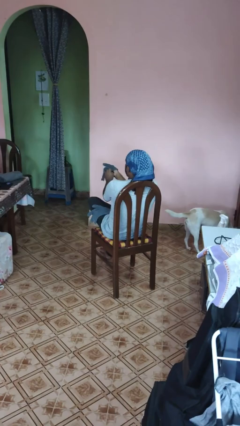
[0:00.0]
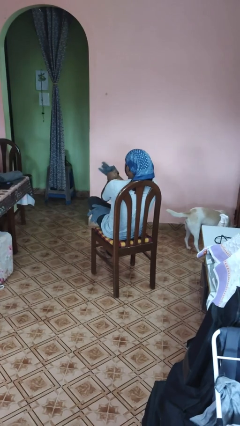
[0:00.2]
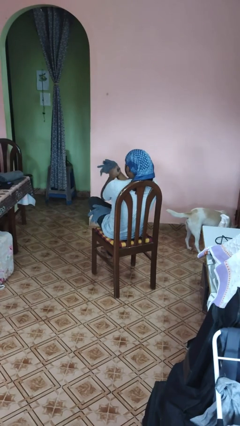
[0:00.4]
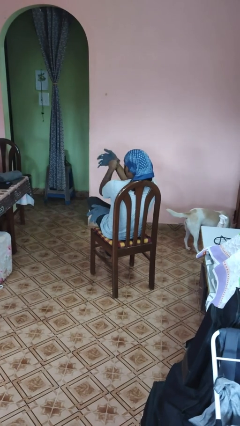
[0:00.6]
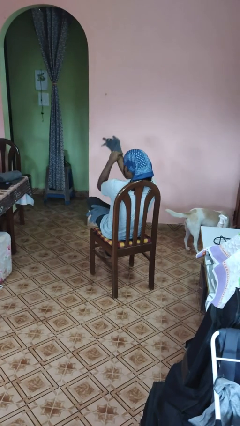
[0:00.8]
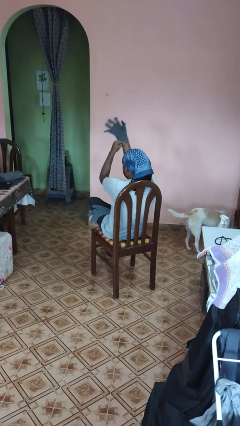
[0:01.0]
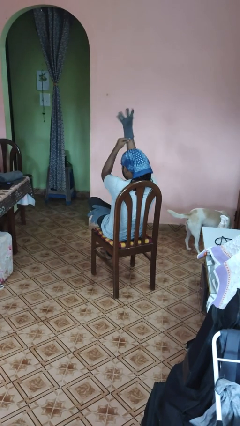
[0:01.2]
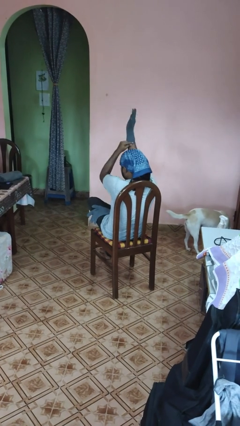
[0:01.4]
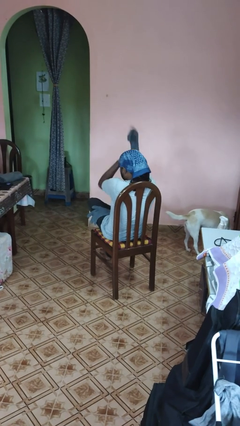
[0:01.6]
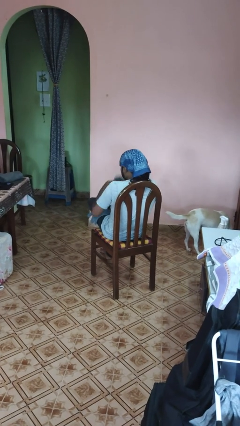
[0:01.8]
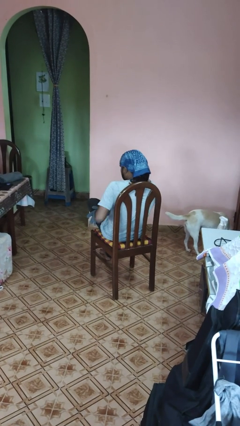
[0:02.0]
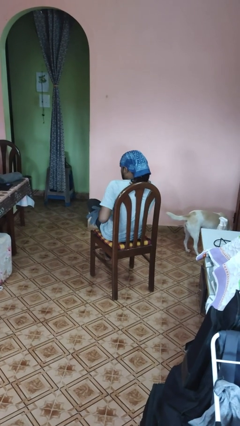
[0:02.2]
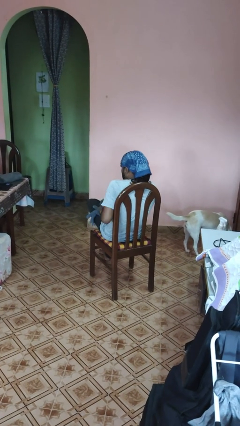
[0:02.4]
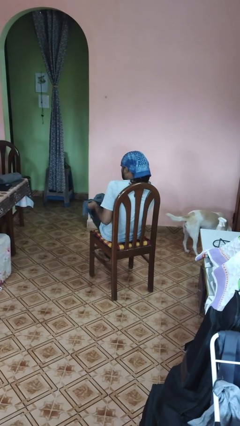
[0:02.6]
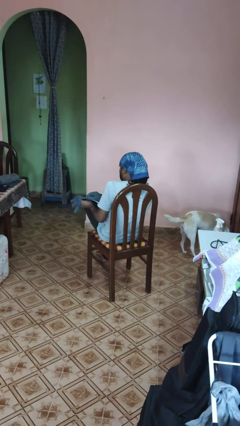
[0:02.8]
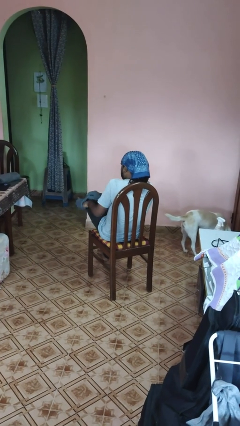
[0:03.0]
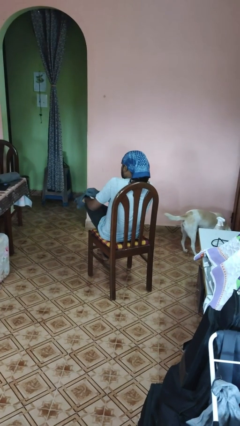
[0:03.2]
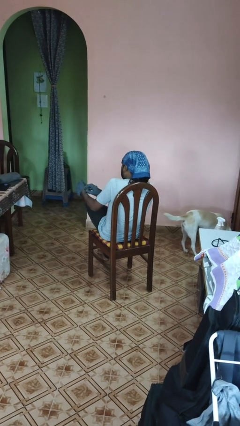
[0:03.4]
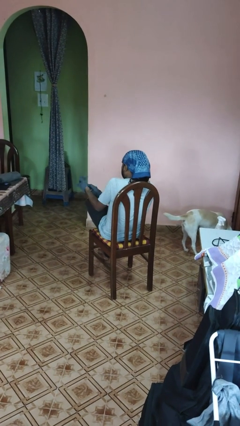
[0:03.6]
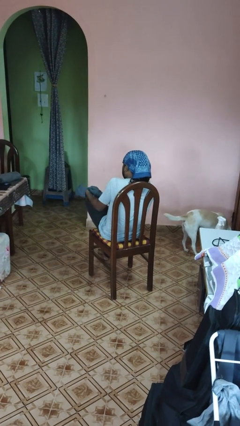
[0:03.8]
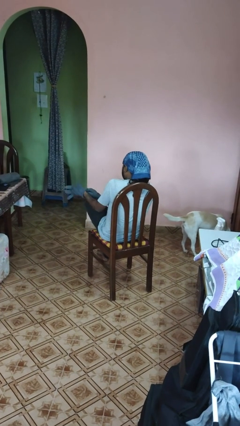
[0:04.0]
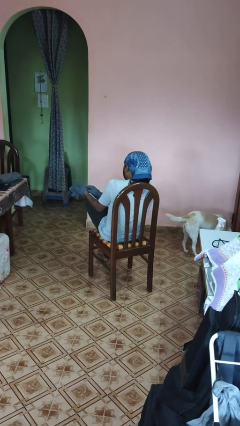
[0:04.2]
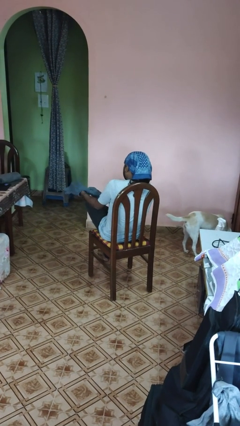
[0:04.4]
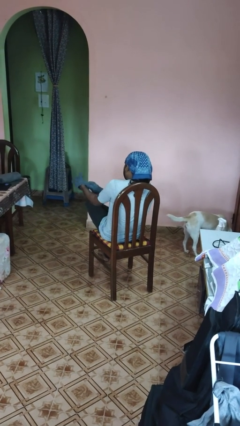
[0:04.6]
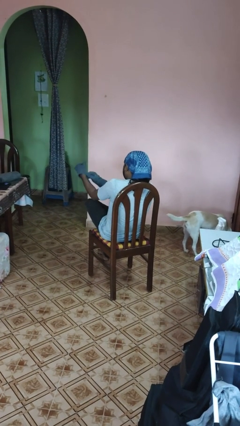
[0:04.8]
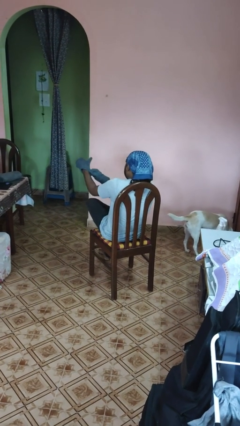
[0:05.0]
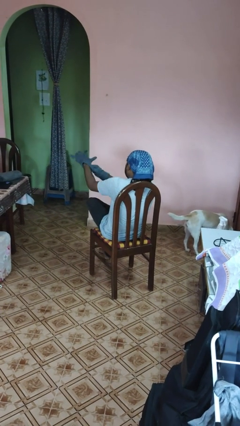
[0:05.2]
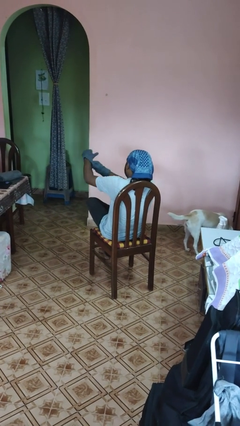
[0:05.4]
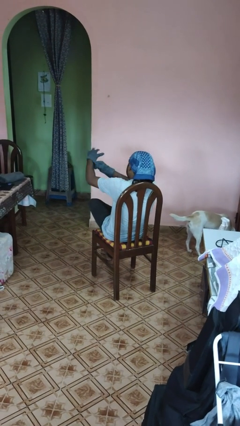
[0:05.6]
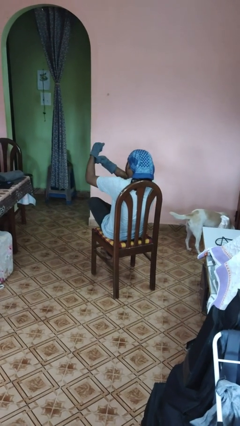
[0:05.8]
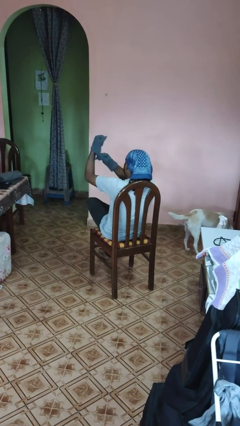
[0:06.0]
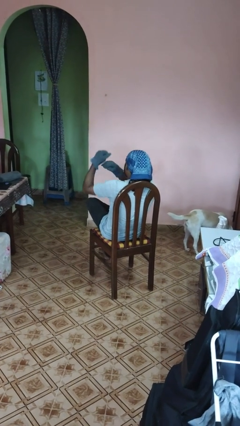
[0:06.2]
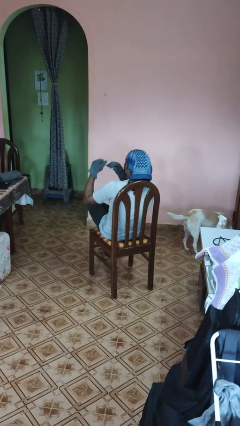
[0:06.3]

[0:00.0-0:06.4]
person puts on gloves

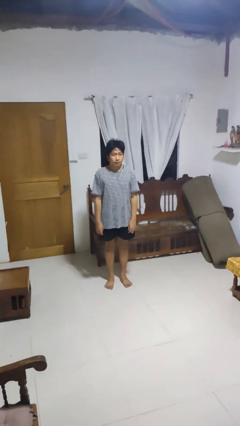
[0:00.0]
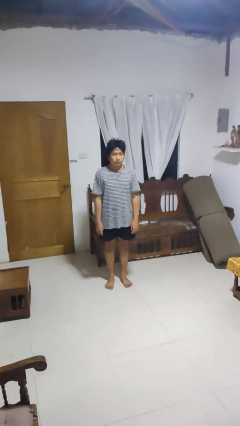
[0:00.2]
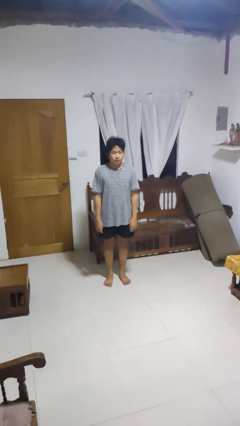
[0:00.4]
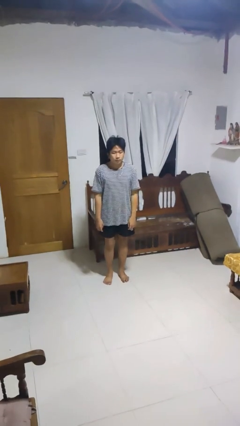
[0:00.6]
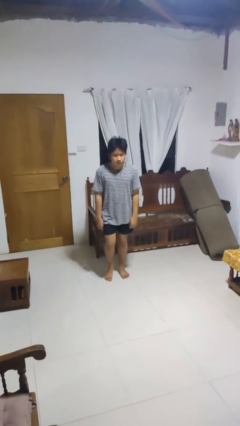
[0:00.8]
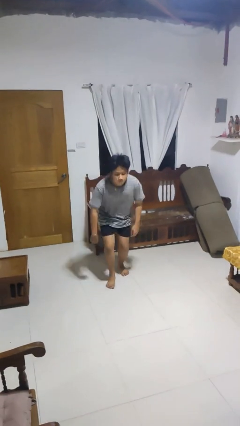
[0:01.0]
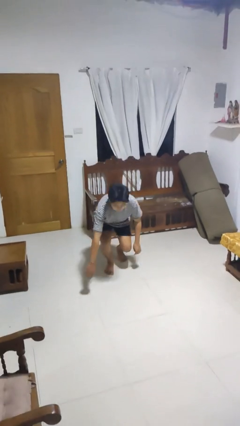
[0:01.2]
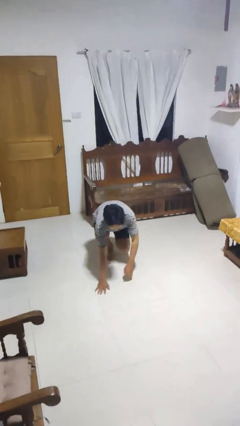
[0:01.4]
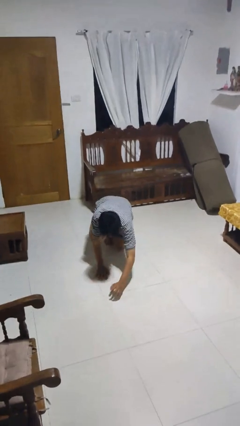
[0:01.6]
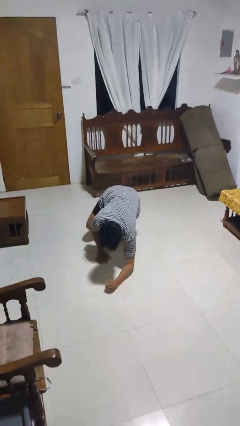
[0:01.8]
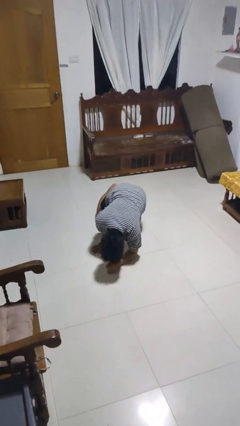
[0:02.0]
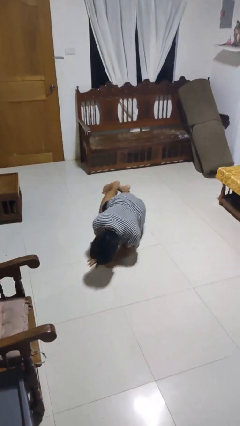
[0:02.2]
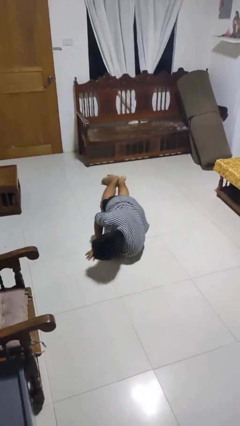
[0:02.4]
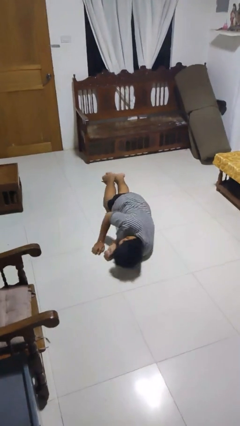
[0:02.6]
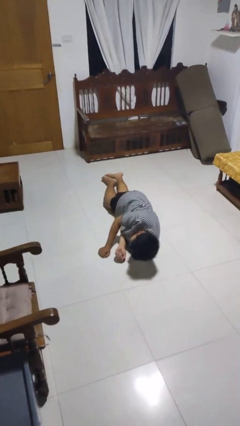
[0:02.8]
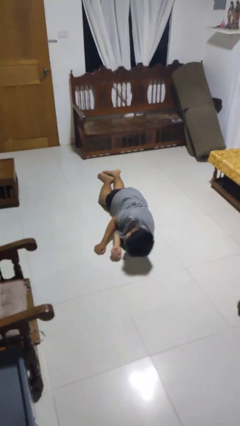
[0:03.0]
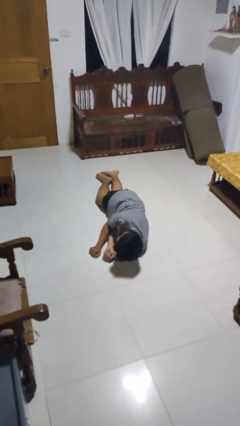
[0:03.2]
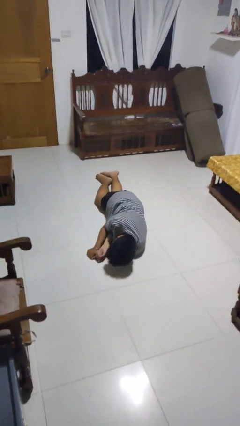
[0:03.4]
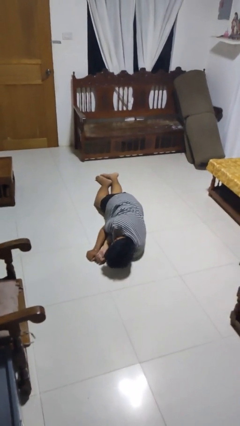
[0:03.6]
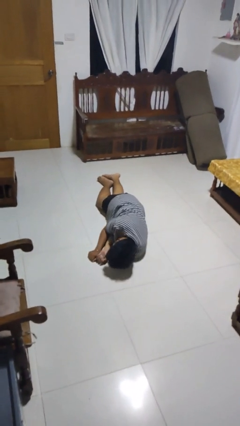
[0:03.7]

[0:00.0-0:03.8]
person falls while standing

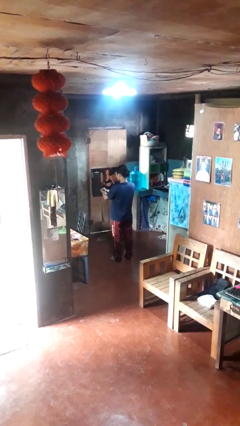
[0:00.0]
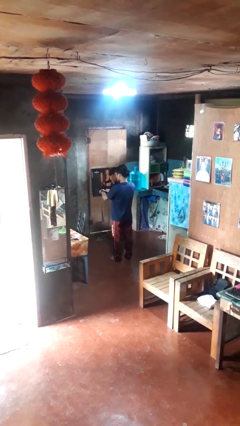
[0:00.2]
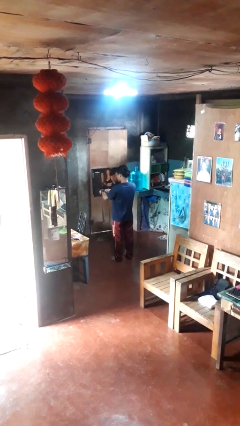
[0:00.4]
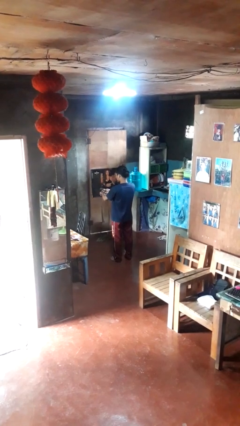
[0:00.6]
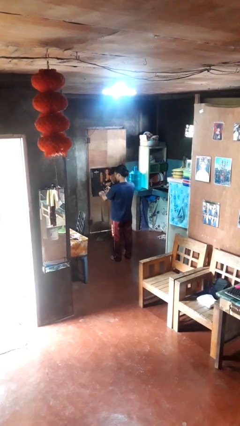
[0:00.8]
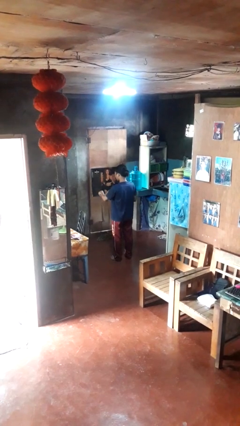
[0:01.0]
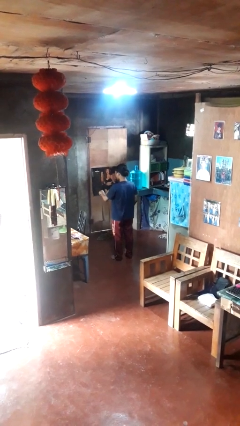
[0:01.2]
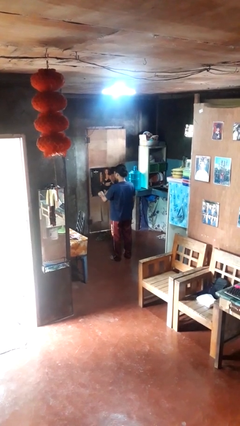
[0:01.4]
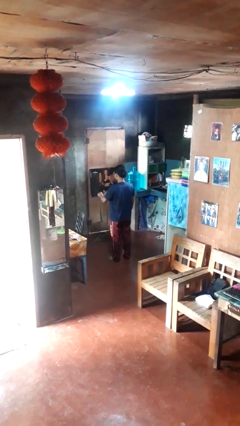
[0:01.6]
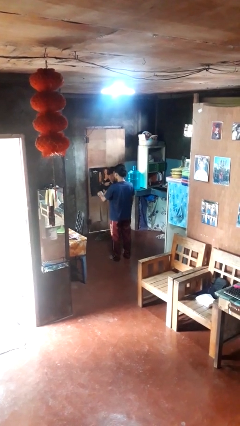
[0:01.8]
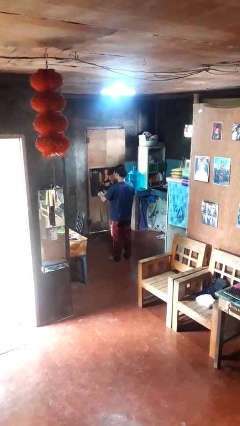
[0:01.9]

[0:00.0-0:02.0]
person takes off wristwatch

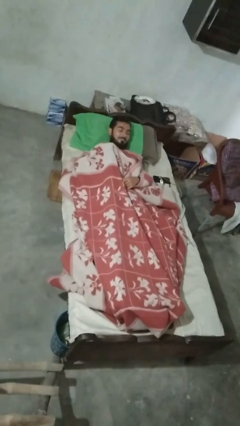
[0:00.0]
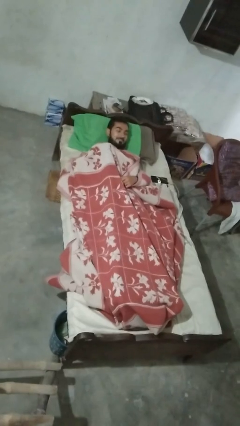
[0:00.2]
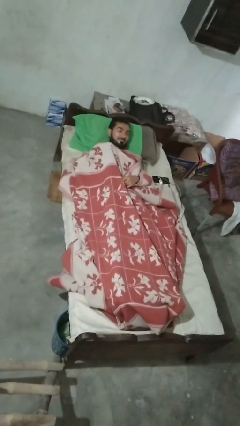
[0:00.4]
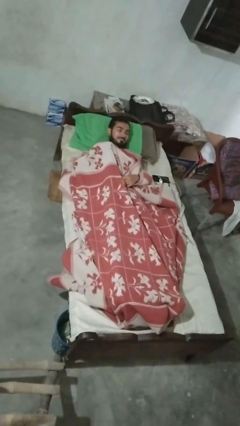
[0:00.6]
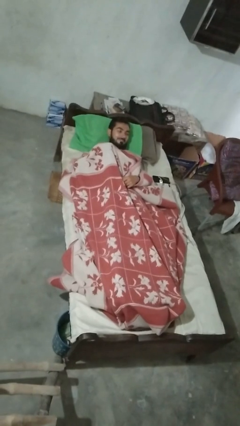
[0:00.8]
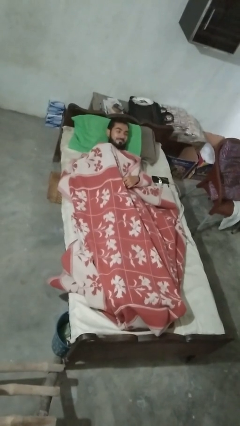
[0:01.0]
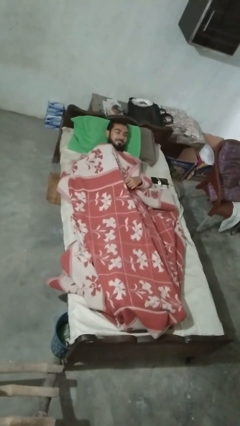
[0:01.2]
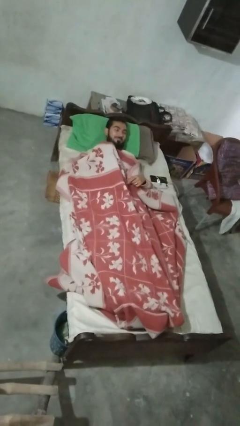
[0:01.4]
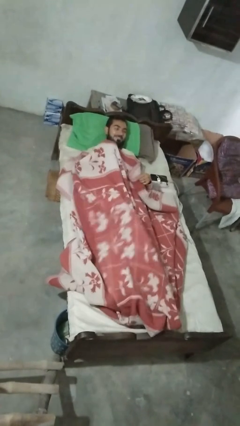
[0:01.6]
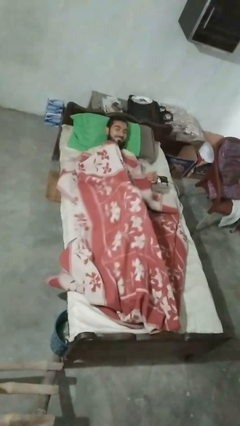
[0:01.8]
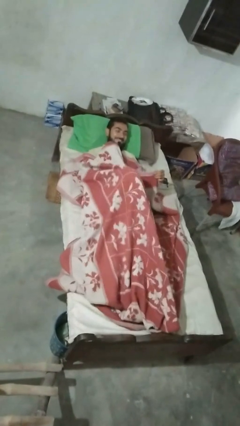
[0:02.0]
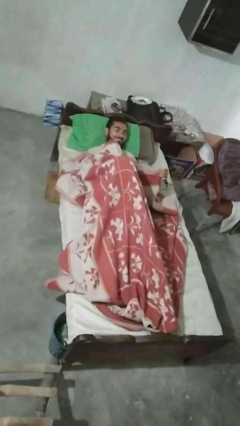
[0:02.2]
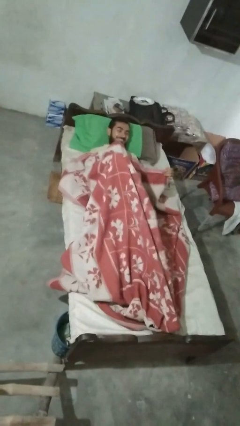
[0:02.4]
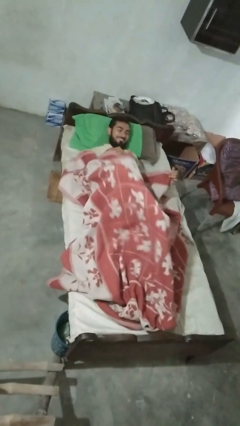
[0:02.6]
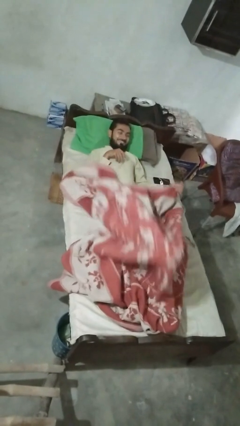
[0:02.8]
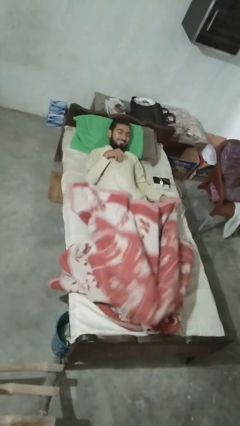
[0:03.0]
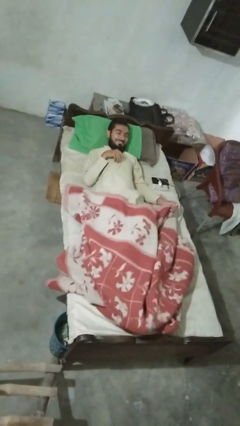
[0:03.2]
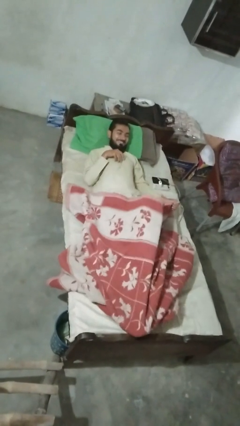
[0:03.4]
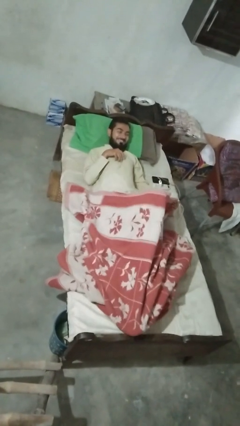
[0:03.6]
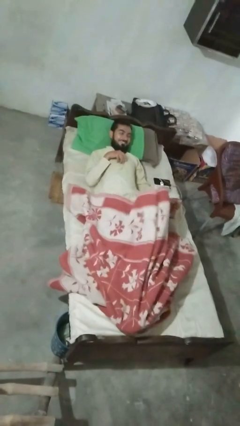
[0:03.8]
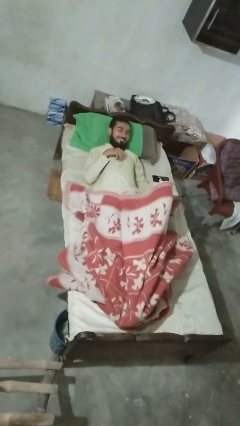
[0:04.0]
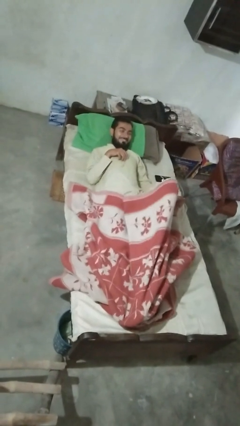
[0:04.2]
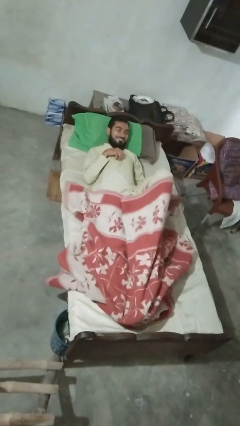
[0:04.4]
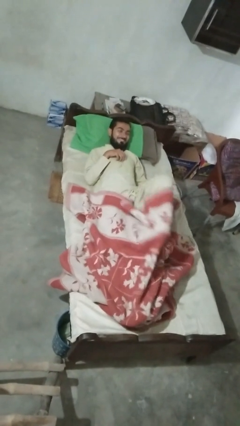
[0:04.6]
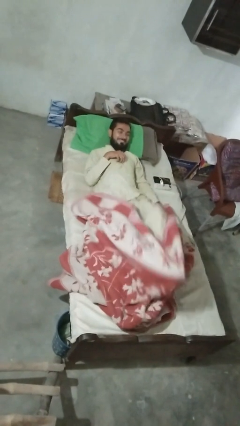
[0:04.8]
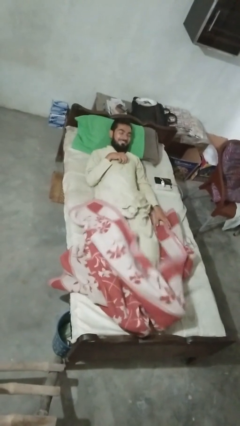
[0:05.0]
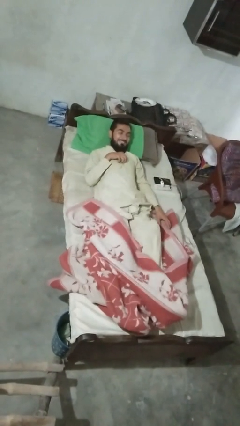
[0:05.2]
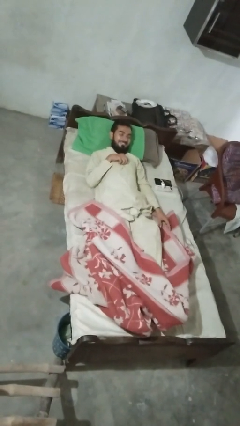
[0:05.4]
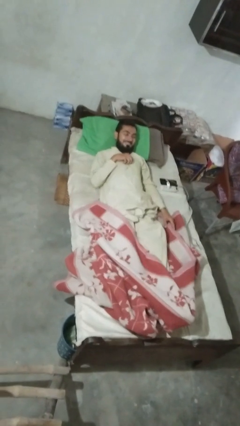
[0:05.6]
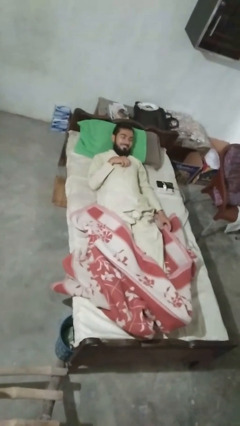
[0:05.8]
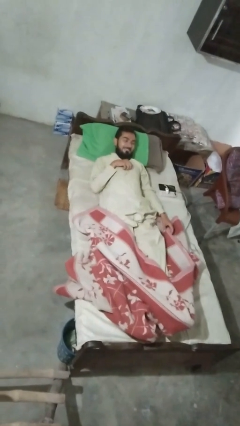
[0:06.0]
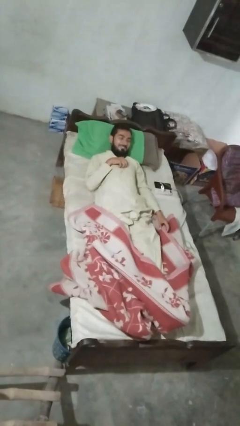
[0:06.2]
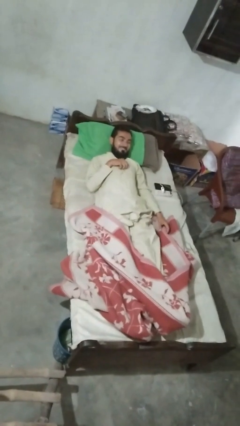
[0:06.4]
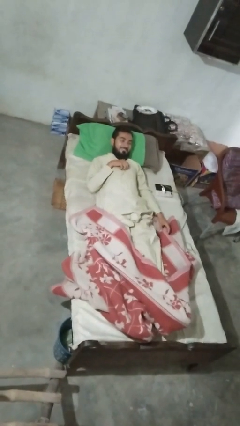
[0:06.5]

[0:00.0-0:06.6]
person uncovers with bedsheets
